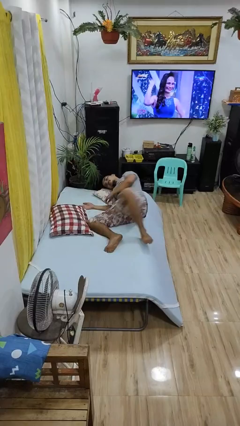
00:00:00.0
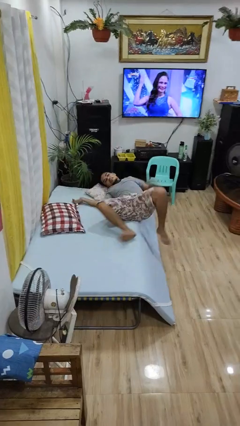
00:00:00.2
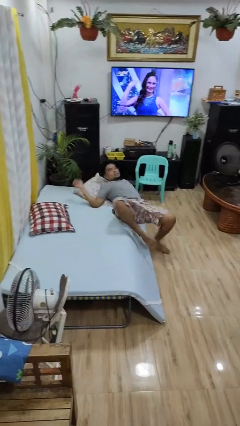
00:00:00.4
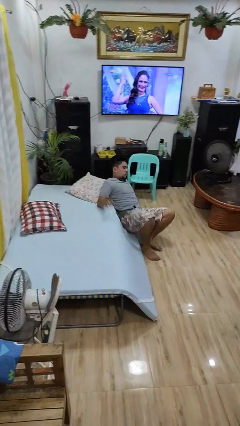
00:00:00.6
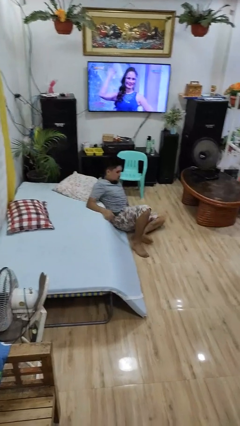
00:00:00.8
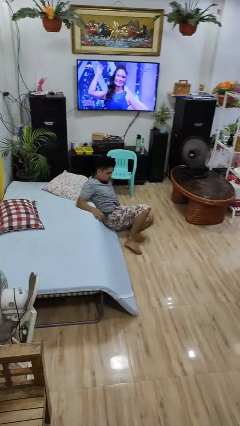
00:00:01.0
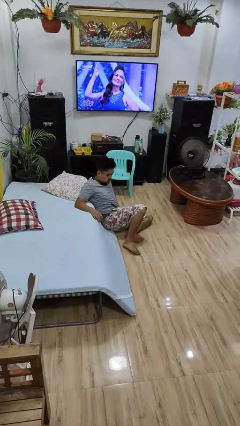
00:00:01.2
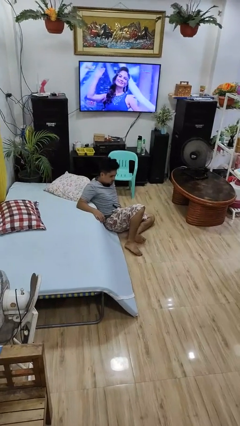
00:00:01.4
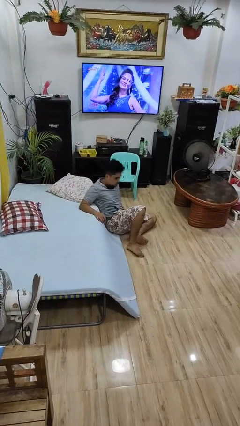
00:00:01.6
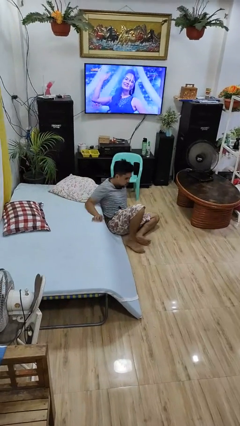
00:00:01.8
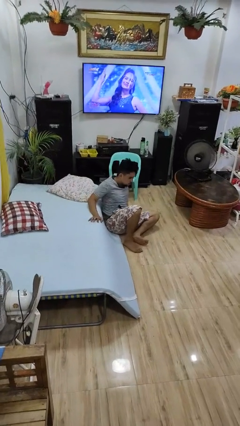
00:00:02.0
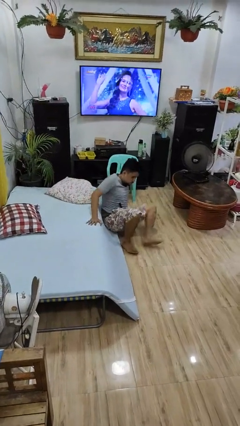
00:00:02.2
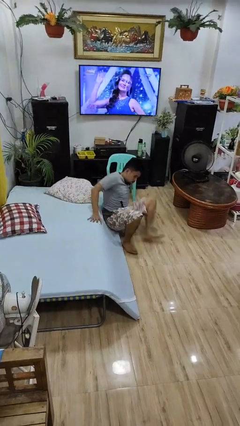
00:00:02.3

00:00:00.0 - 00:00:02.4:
person falls from bed

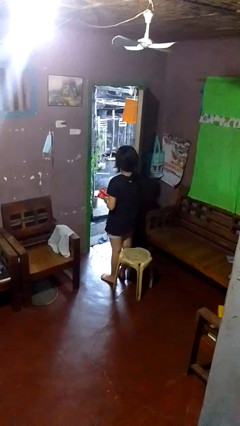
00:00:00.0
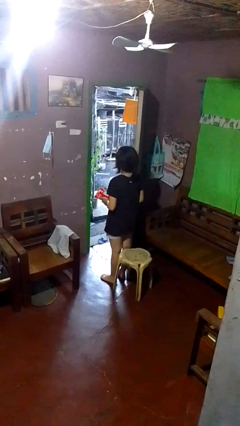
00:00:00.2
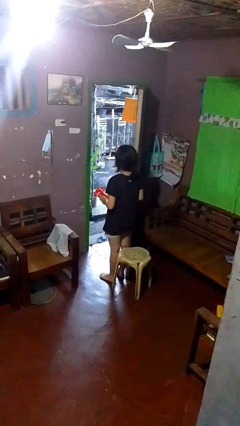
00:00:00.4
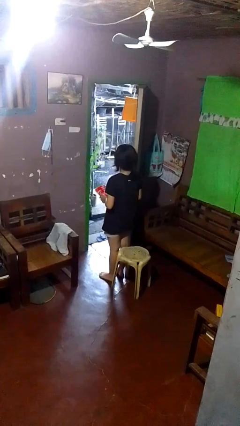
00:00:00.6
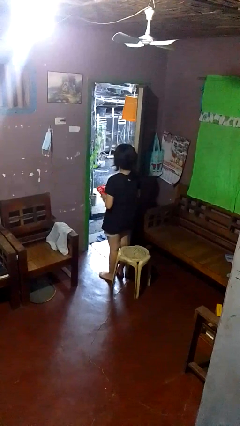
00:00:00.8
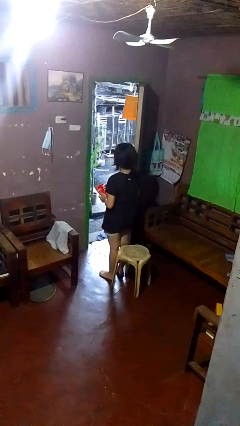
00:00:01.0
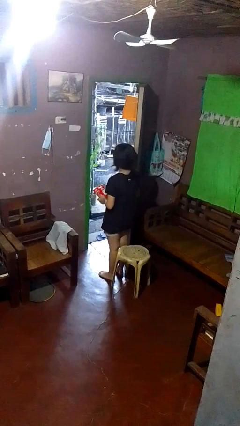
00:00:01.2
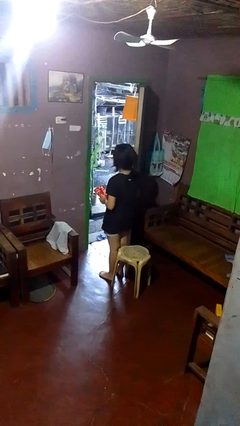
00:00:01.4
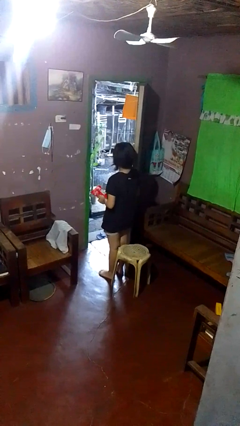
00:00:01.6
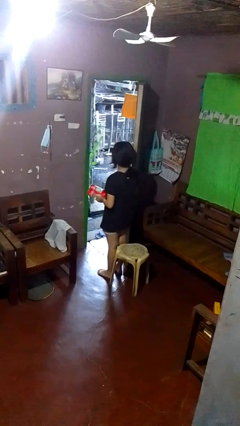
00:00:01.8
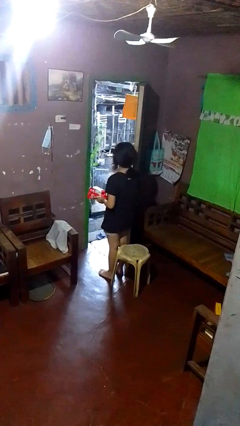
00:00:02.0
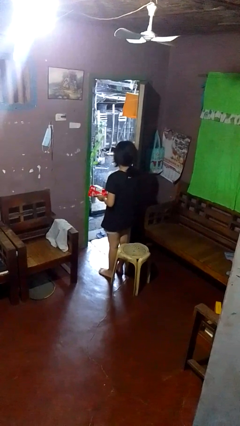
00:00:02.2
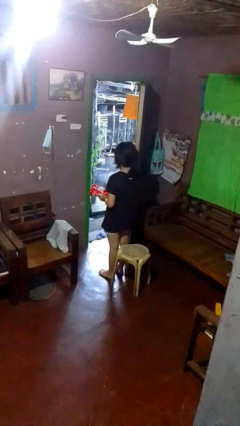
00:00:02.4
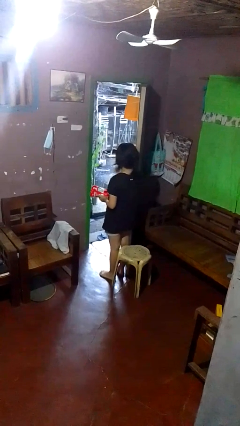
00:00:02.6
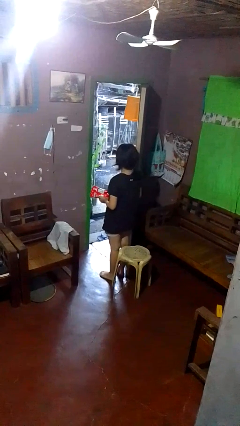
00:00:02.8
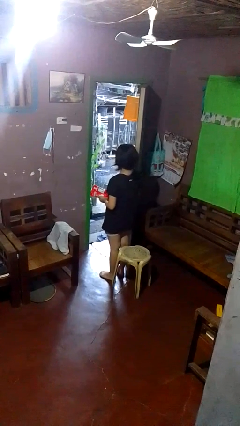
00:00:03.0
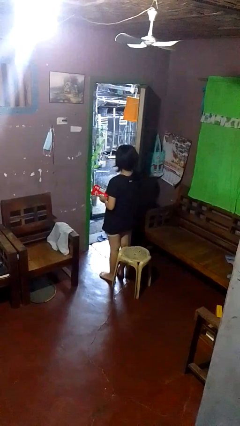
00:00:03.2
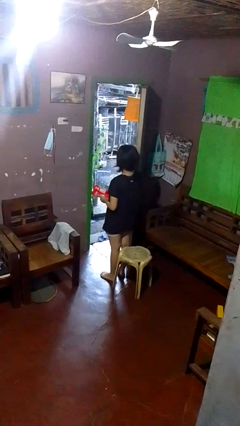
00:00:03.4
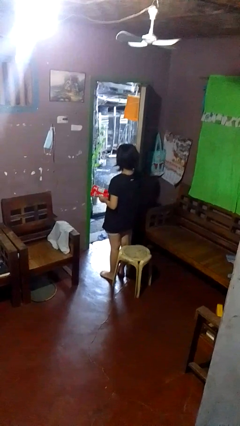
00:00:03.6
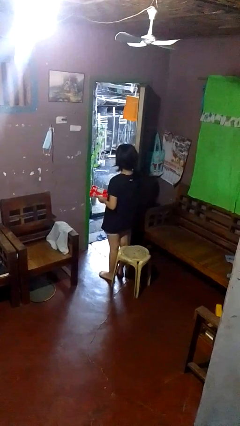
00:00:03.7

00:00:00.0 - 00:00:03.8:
person eats snack from bag

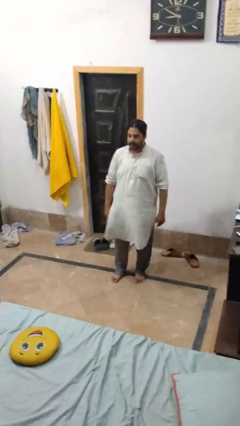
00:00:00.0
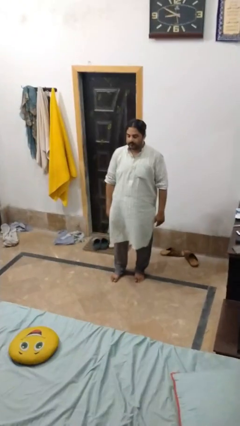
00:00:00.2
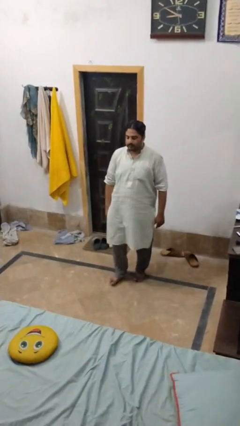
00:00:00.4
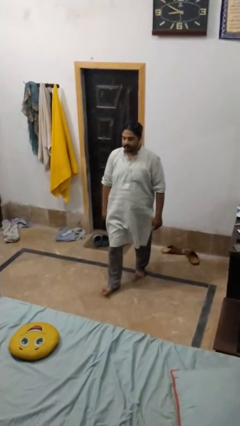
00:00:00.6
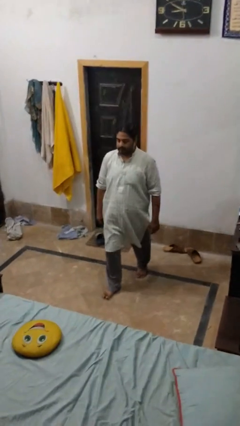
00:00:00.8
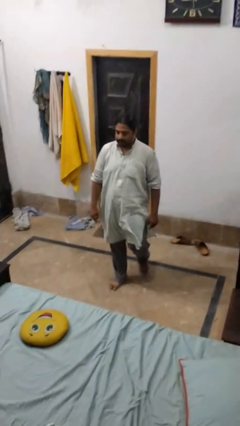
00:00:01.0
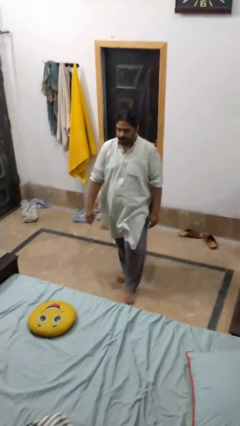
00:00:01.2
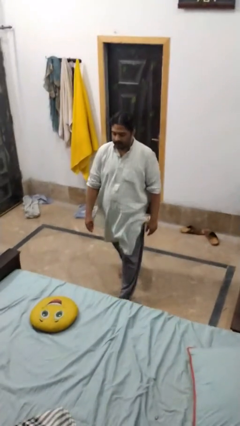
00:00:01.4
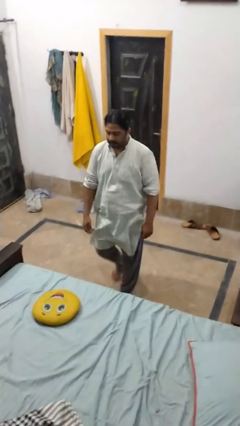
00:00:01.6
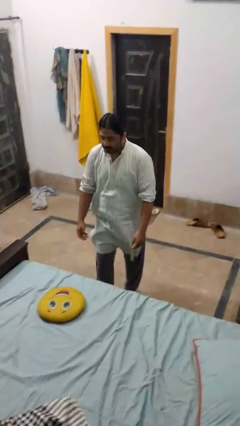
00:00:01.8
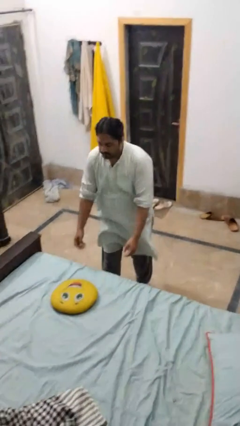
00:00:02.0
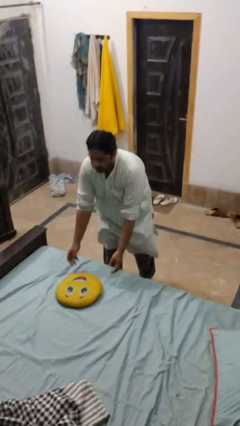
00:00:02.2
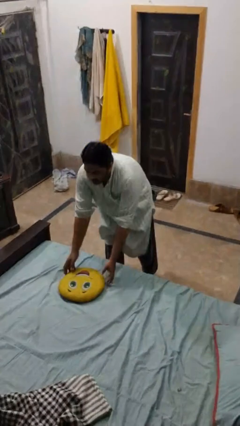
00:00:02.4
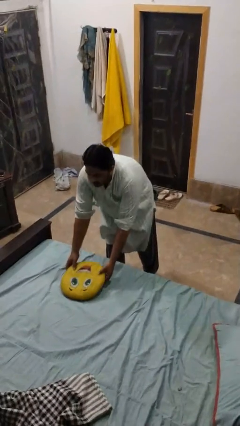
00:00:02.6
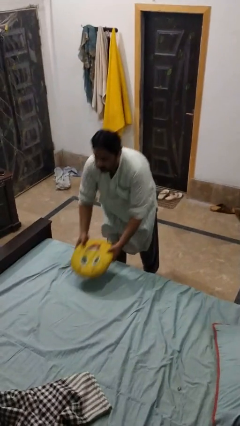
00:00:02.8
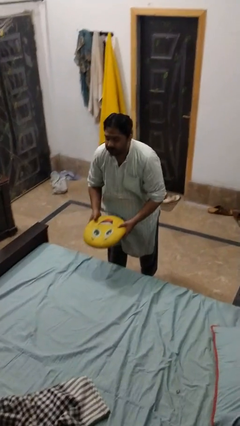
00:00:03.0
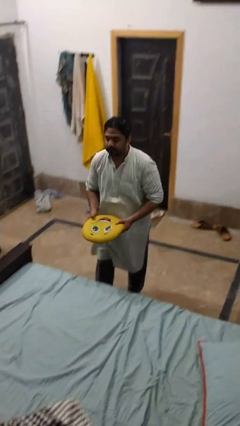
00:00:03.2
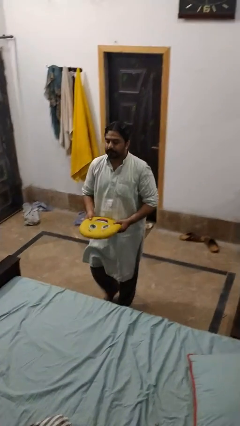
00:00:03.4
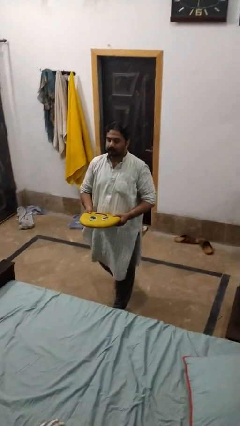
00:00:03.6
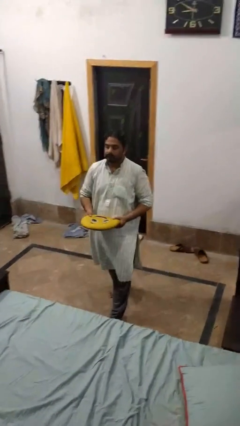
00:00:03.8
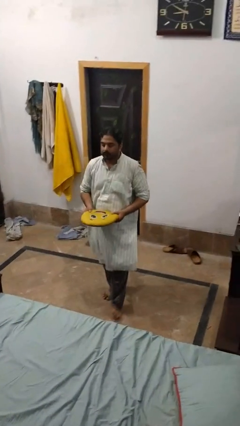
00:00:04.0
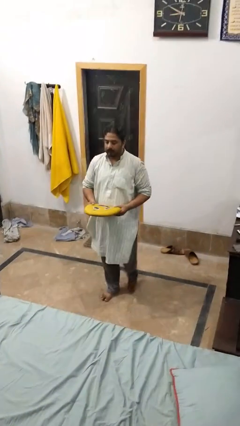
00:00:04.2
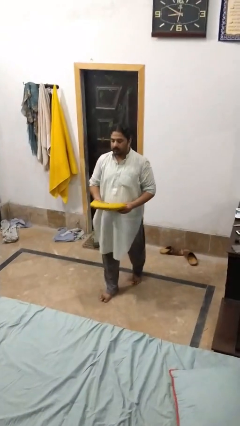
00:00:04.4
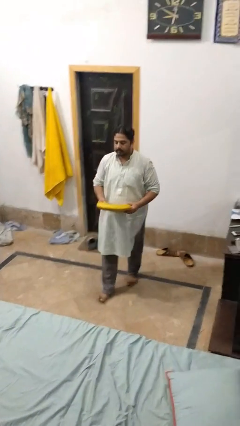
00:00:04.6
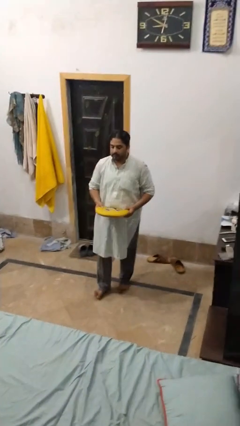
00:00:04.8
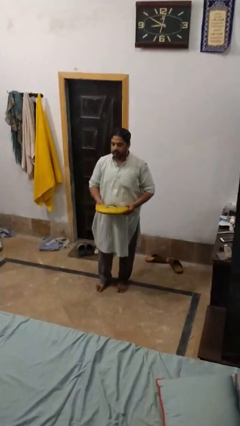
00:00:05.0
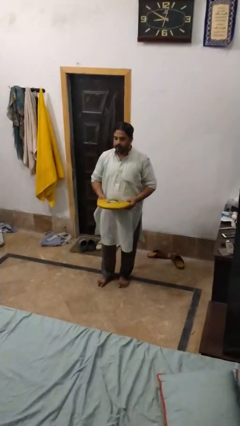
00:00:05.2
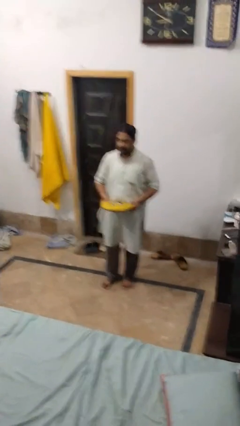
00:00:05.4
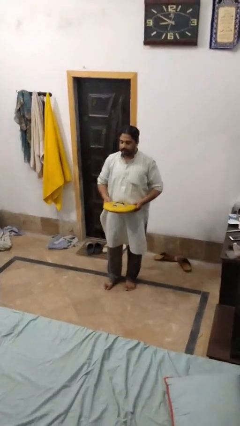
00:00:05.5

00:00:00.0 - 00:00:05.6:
person picks up object from bed

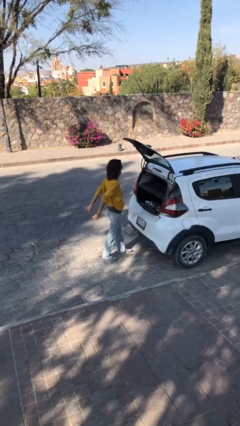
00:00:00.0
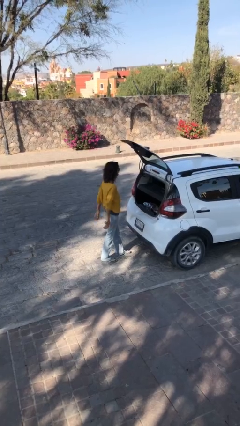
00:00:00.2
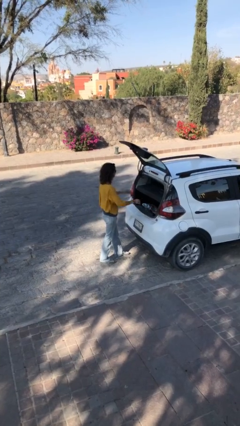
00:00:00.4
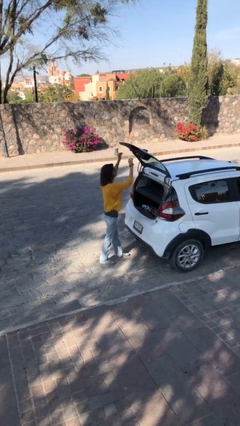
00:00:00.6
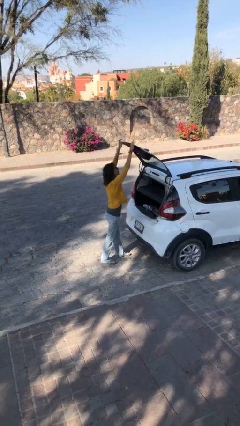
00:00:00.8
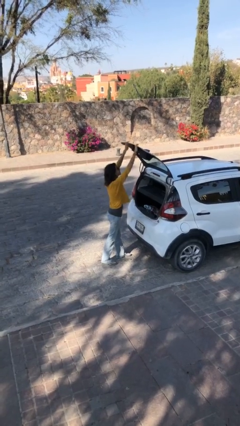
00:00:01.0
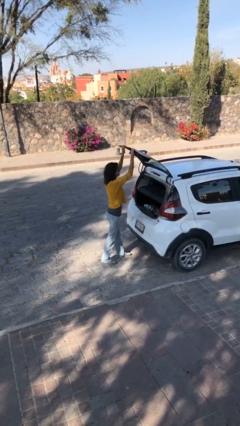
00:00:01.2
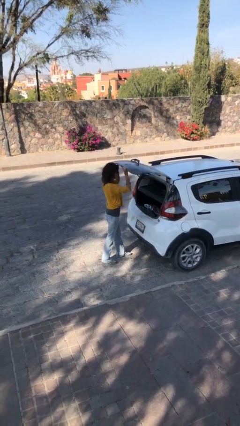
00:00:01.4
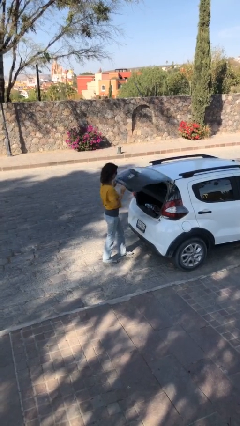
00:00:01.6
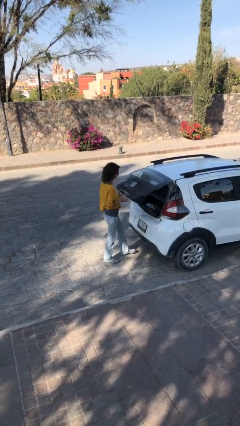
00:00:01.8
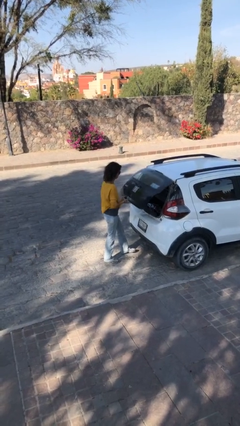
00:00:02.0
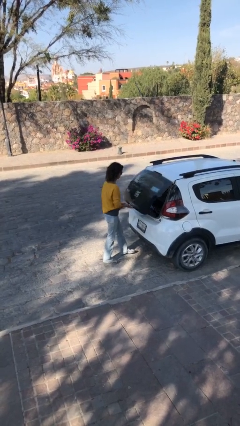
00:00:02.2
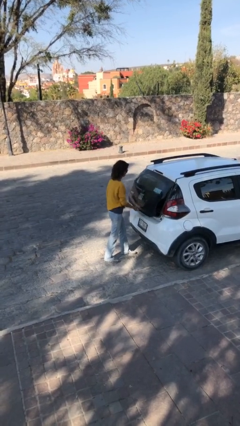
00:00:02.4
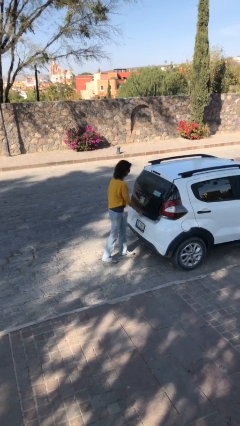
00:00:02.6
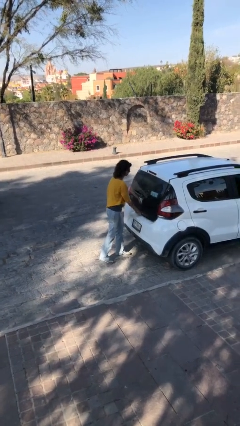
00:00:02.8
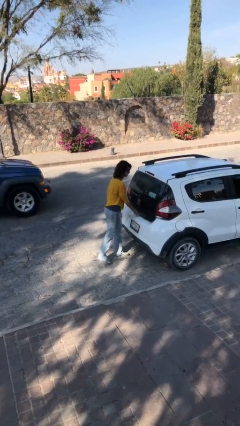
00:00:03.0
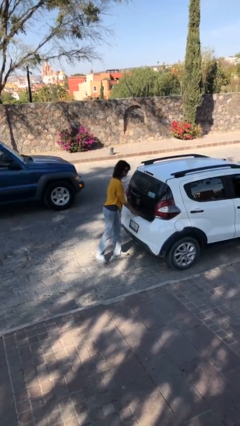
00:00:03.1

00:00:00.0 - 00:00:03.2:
person closes car trunk

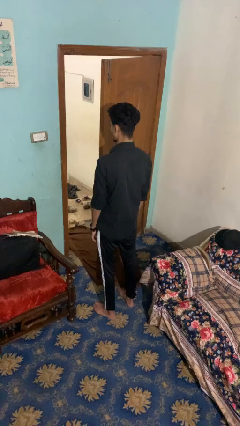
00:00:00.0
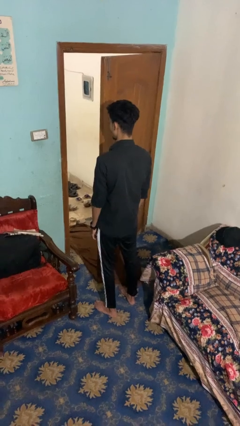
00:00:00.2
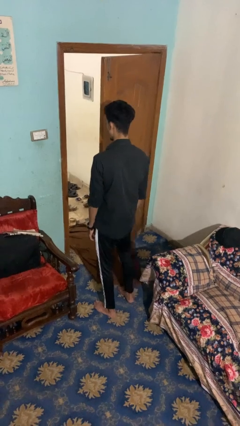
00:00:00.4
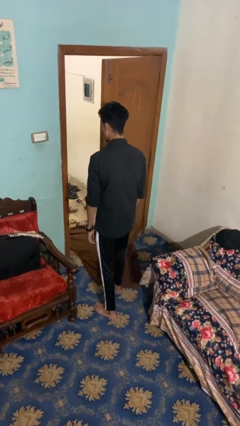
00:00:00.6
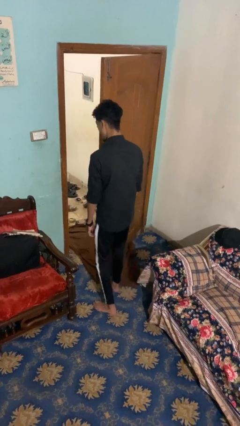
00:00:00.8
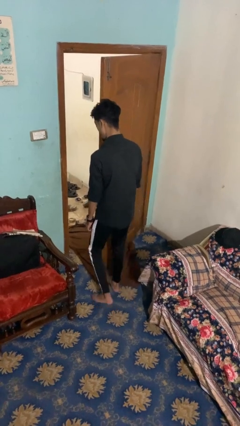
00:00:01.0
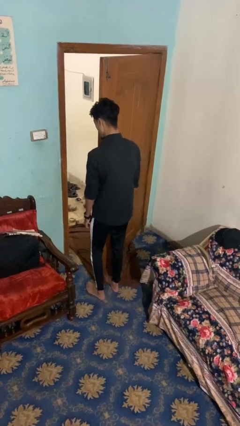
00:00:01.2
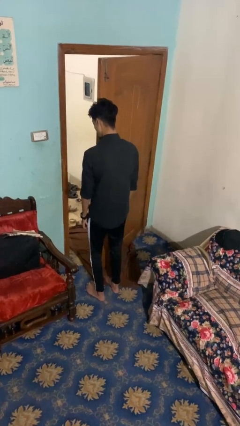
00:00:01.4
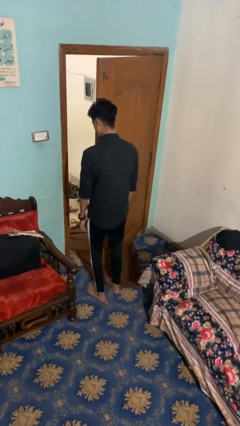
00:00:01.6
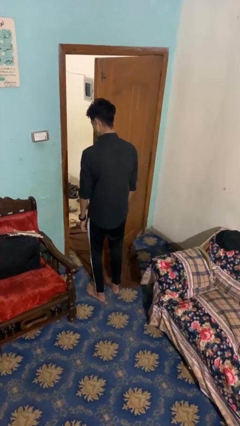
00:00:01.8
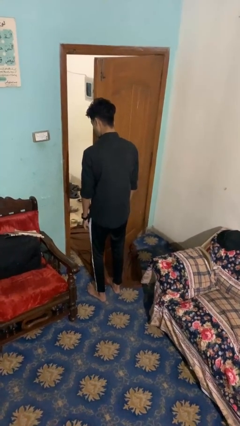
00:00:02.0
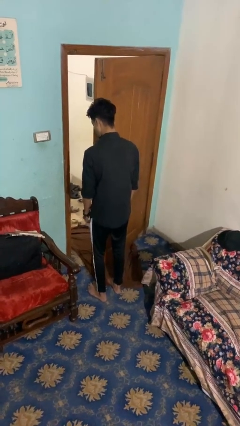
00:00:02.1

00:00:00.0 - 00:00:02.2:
person bumps into wall

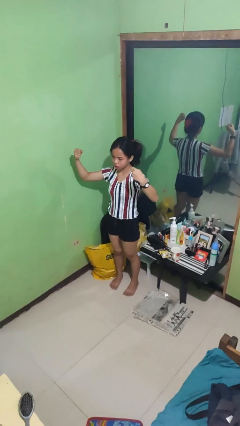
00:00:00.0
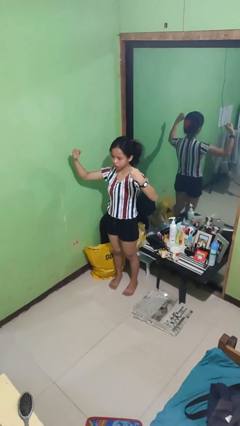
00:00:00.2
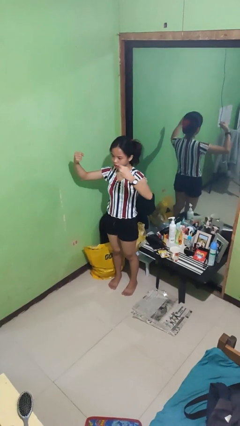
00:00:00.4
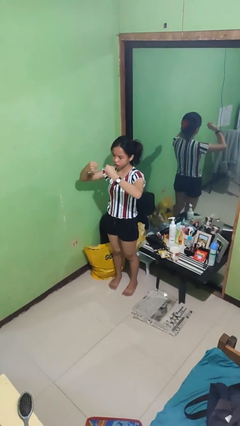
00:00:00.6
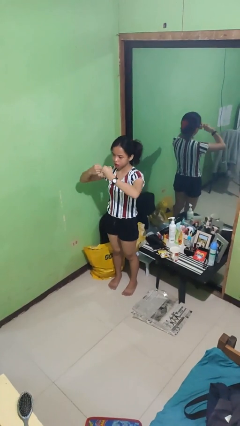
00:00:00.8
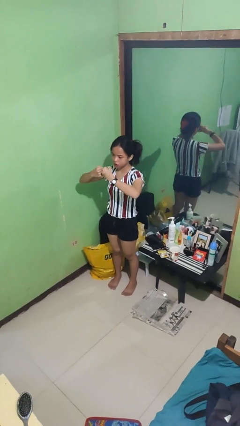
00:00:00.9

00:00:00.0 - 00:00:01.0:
person gestures zoom out
